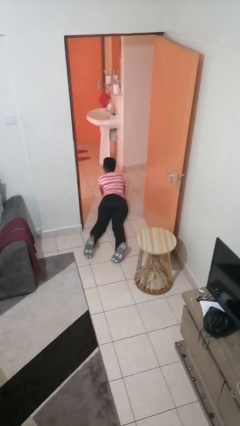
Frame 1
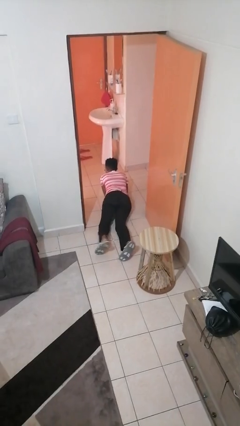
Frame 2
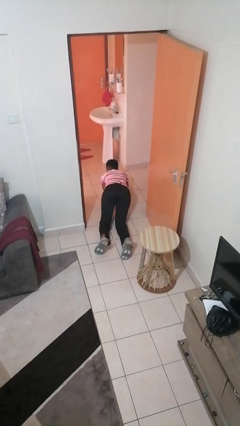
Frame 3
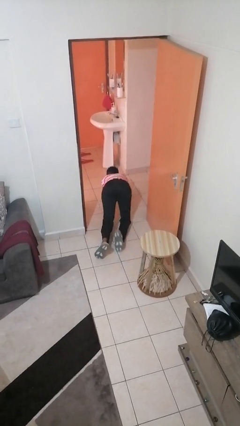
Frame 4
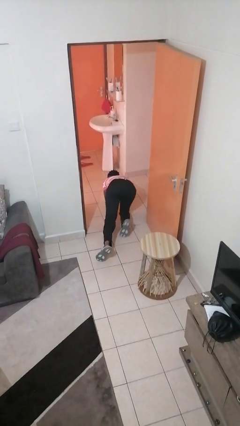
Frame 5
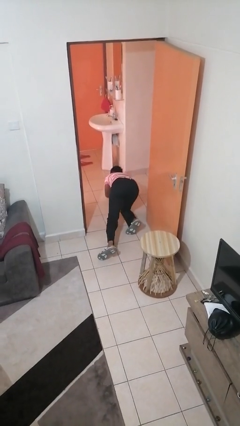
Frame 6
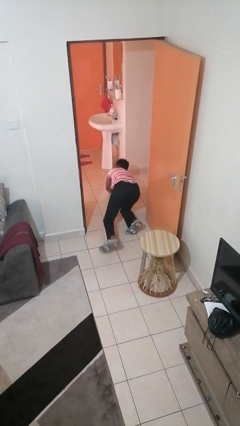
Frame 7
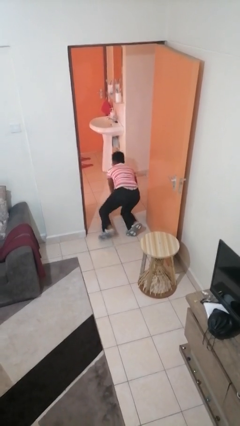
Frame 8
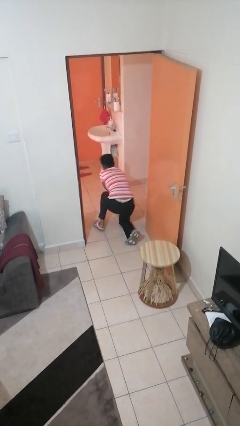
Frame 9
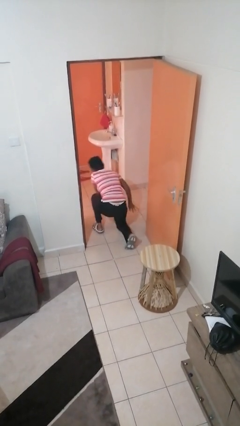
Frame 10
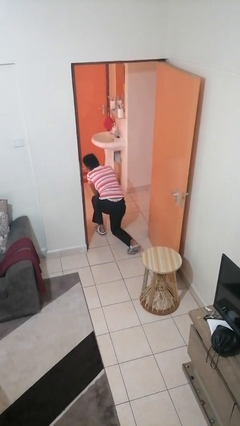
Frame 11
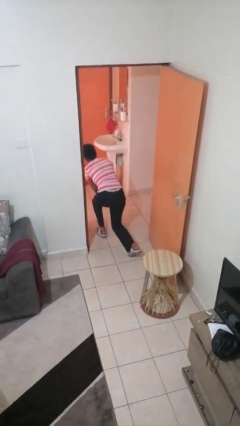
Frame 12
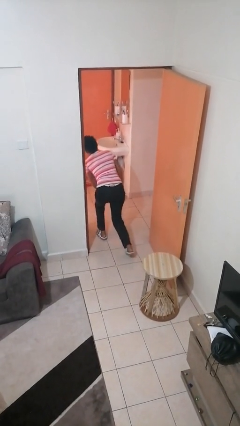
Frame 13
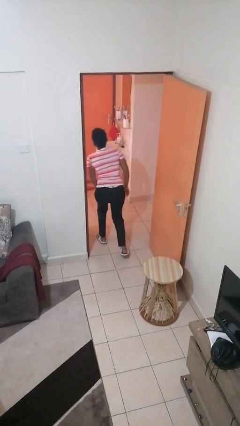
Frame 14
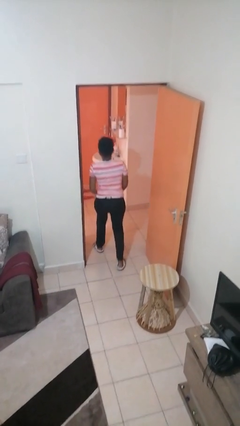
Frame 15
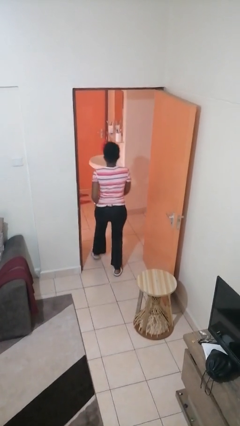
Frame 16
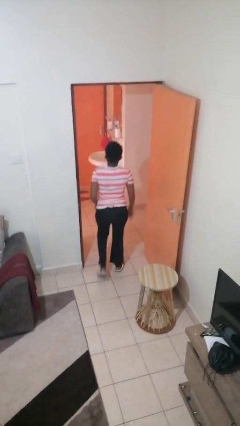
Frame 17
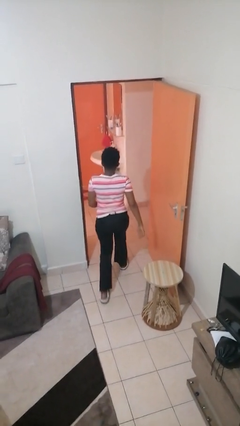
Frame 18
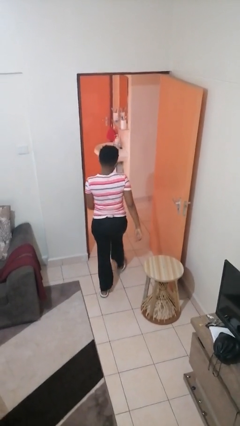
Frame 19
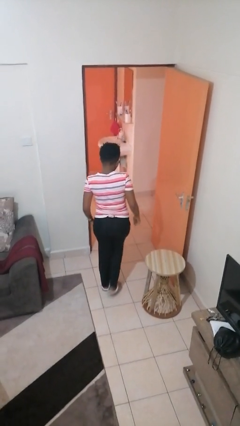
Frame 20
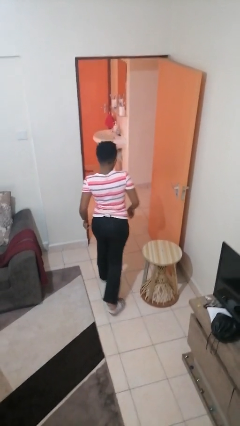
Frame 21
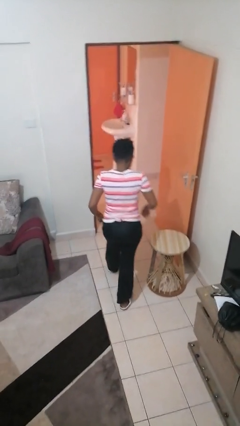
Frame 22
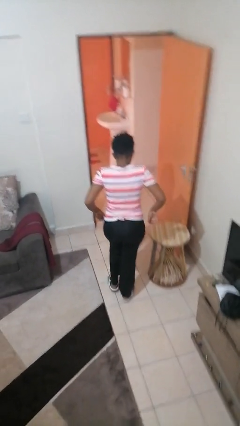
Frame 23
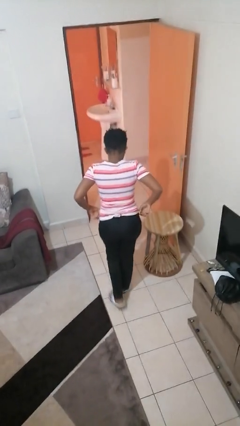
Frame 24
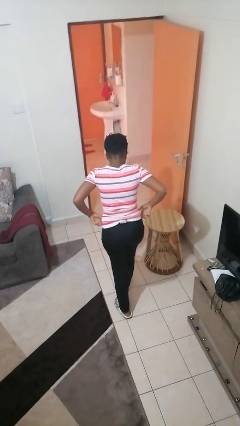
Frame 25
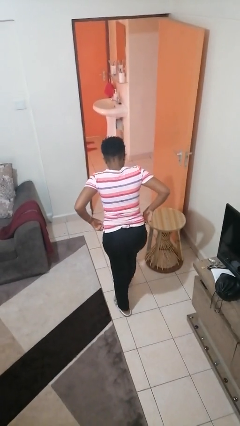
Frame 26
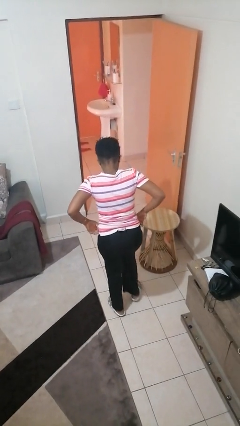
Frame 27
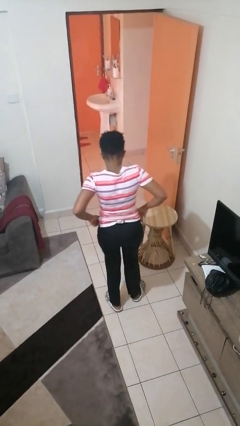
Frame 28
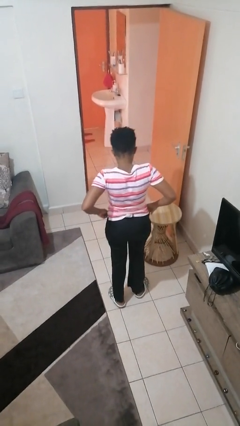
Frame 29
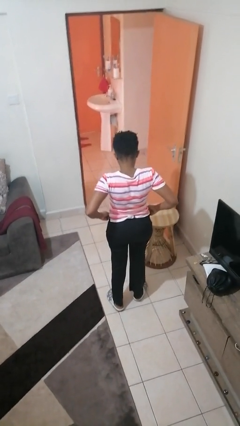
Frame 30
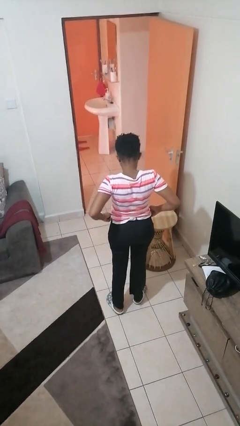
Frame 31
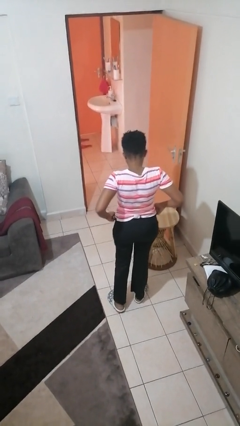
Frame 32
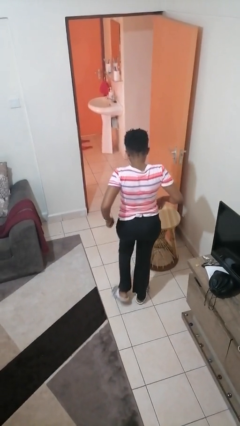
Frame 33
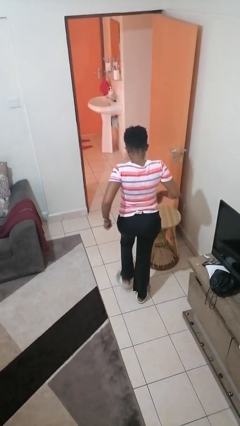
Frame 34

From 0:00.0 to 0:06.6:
person stands up from floor

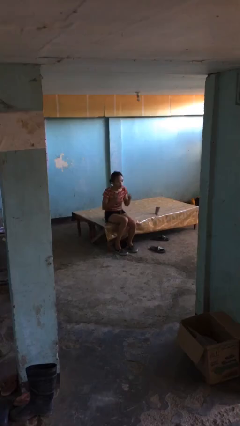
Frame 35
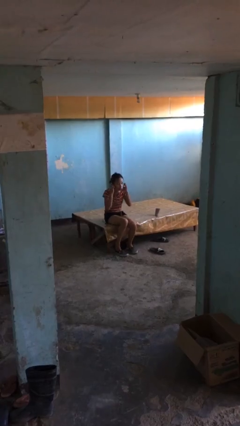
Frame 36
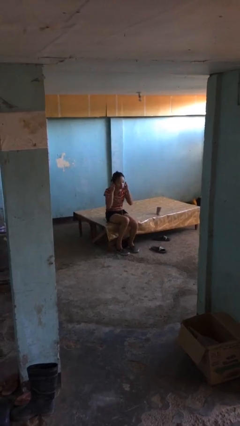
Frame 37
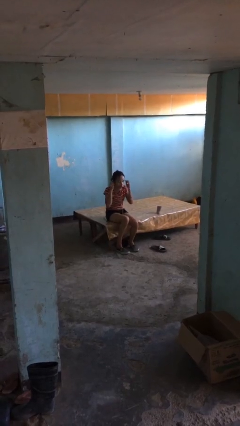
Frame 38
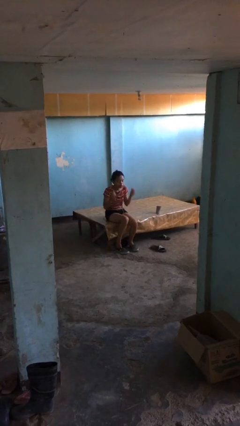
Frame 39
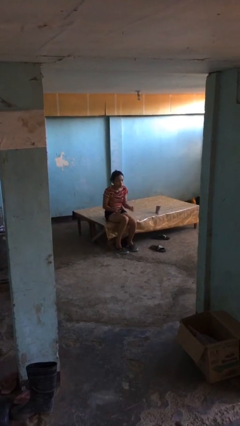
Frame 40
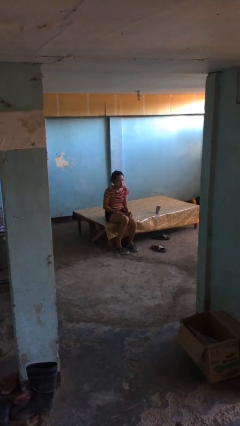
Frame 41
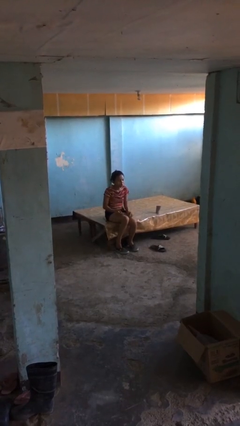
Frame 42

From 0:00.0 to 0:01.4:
person takes off headphones

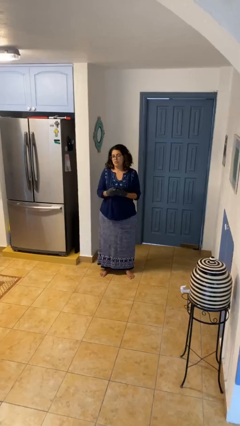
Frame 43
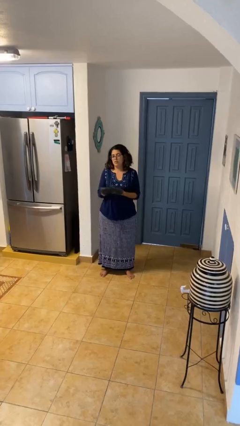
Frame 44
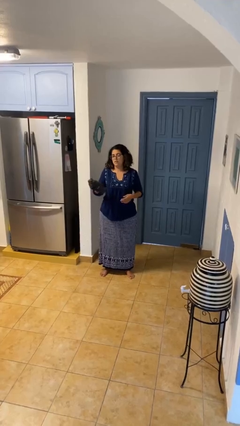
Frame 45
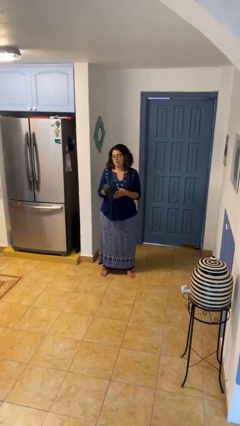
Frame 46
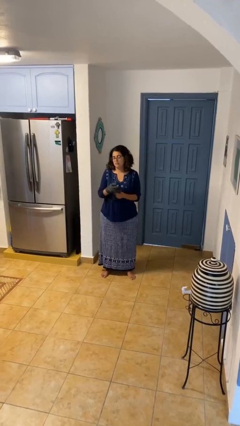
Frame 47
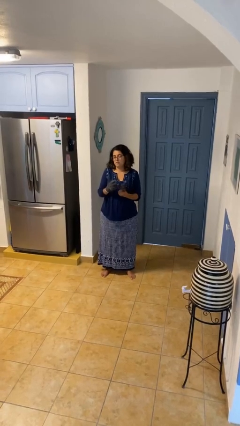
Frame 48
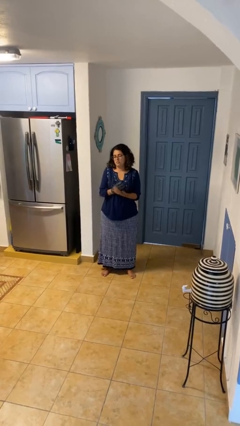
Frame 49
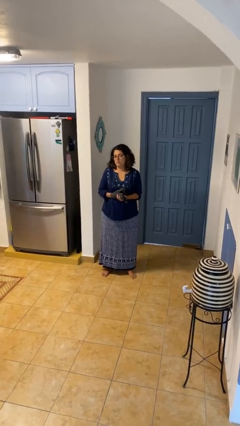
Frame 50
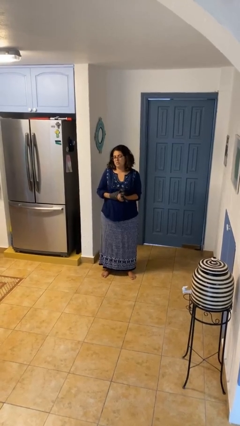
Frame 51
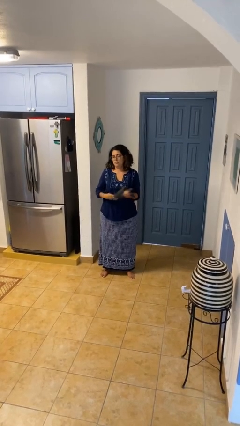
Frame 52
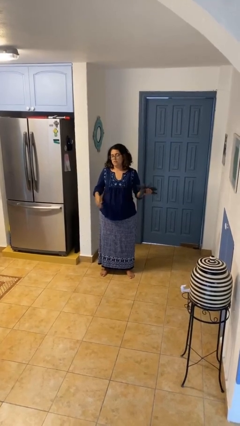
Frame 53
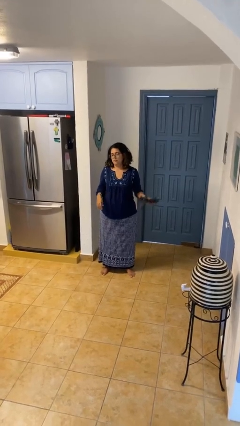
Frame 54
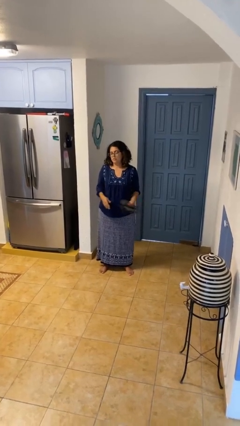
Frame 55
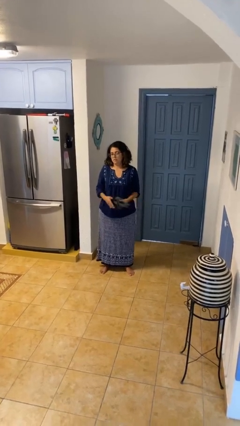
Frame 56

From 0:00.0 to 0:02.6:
person takes off gloves

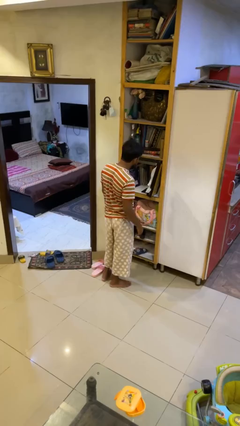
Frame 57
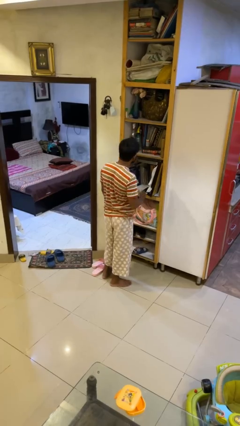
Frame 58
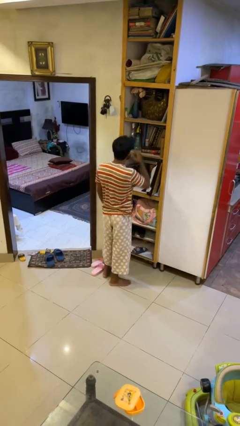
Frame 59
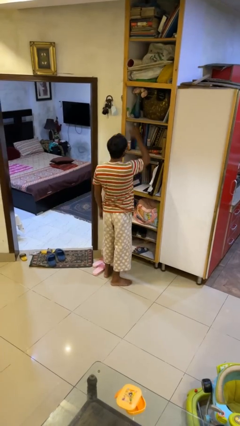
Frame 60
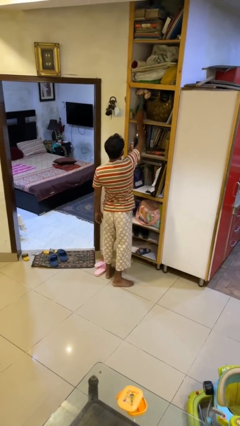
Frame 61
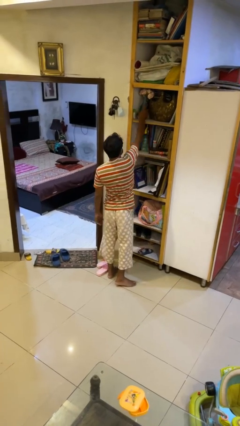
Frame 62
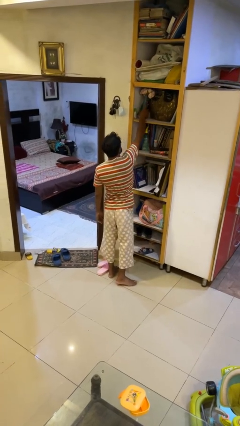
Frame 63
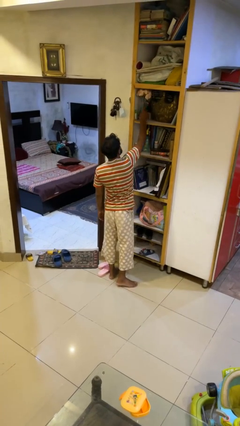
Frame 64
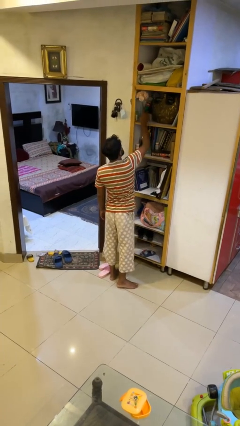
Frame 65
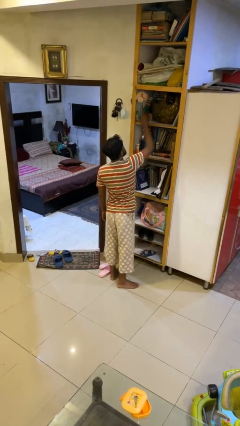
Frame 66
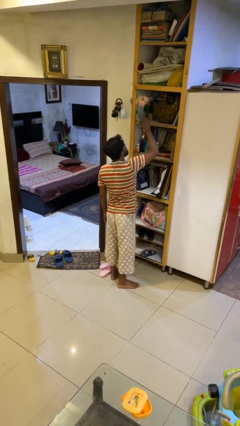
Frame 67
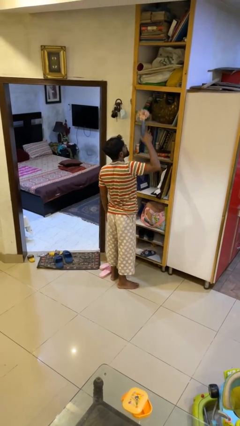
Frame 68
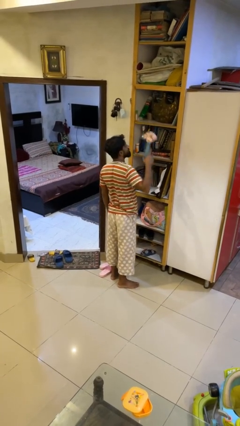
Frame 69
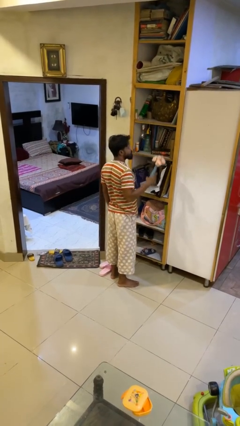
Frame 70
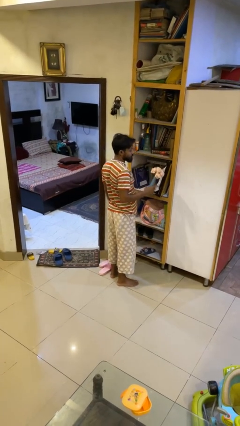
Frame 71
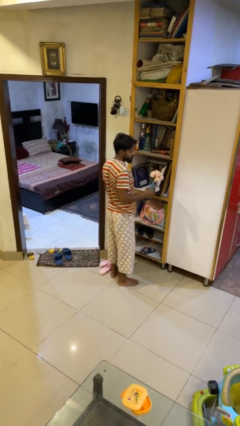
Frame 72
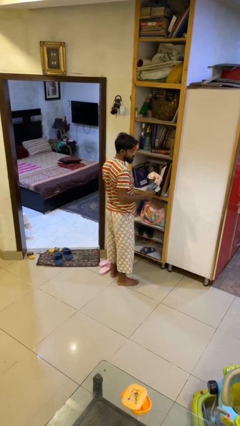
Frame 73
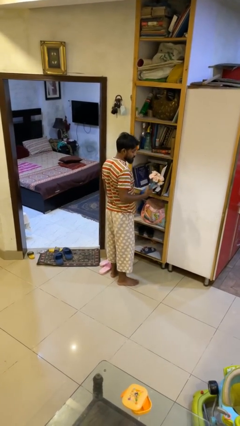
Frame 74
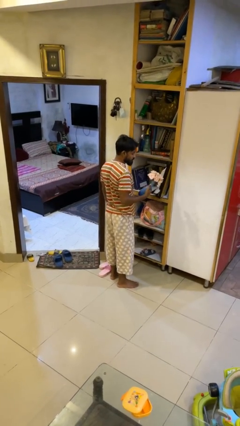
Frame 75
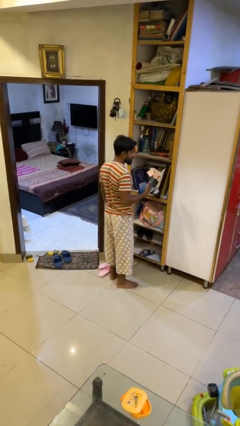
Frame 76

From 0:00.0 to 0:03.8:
person picks up object from shelf

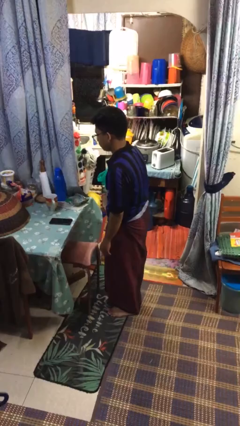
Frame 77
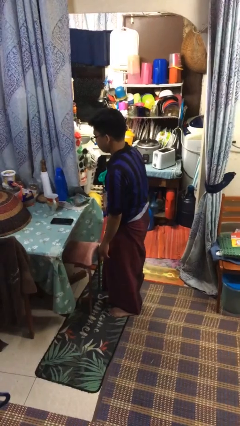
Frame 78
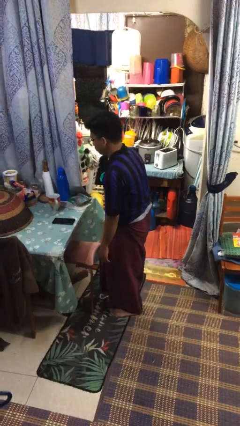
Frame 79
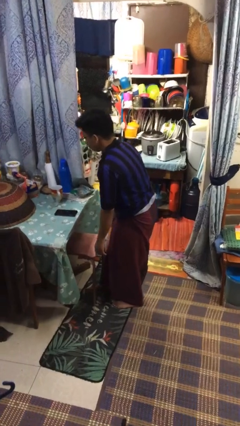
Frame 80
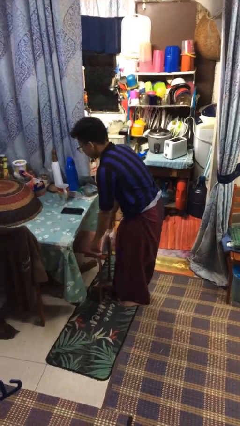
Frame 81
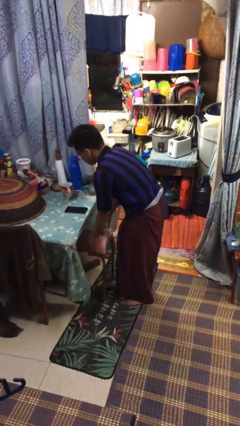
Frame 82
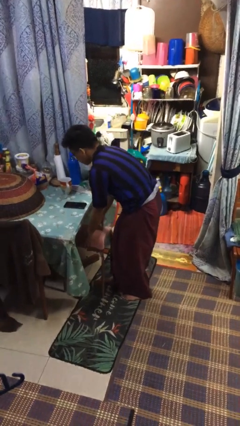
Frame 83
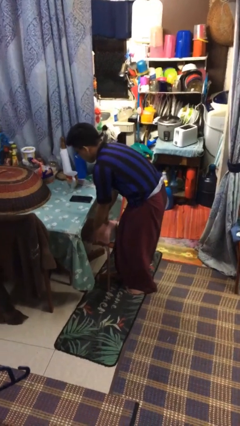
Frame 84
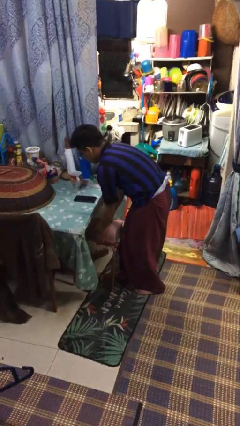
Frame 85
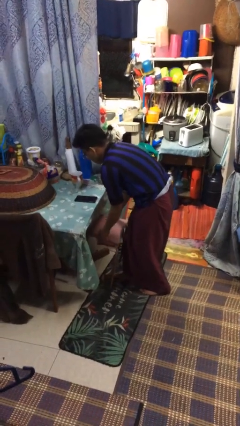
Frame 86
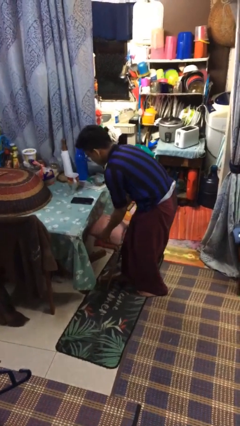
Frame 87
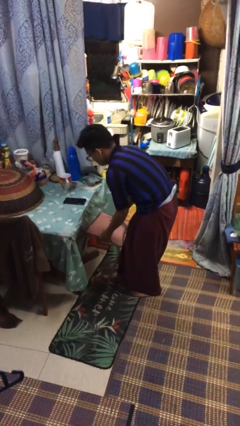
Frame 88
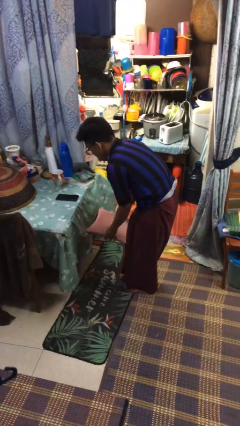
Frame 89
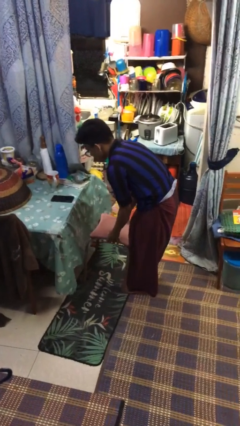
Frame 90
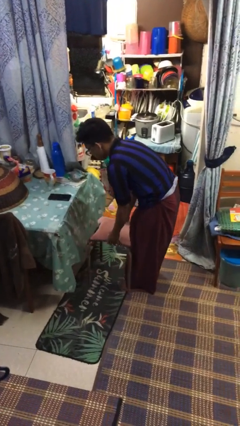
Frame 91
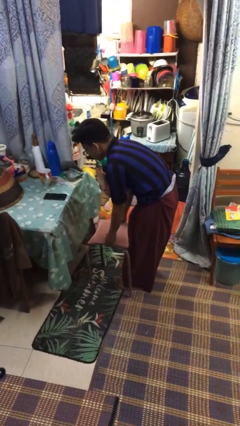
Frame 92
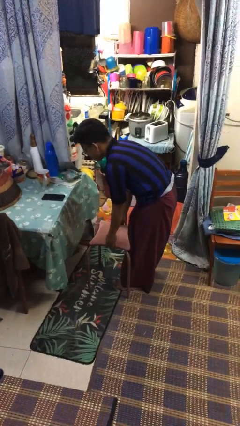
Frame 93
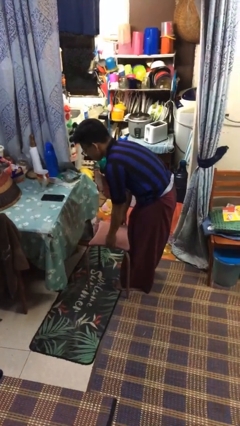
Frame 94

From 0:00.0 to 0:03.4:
person pulls out chair
